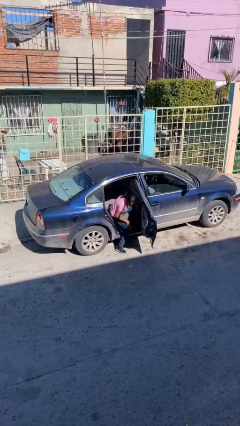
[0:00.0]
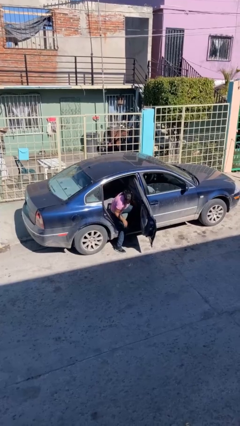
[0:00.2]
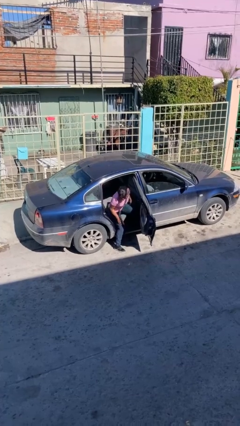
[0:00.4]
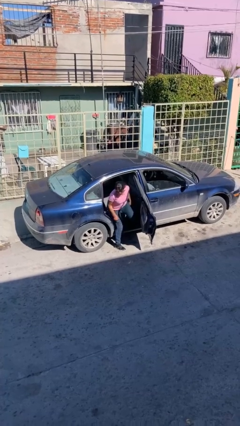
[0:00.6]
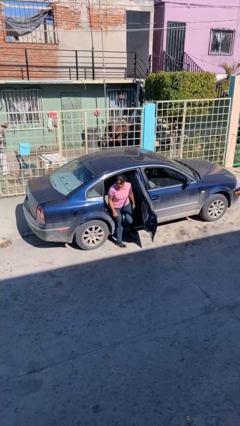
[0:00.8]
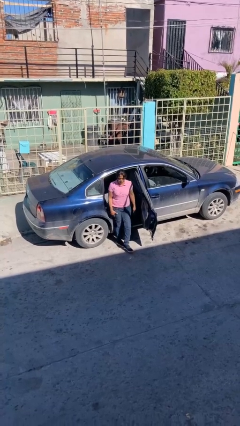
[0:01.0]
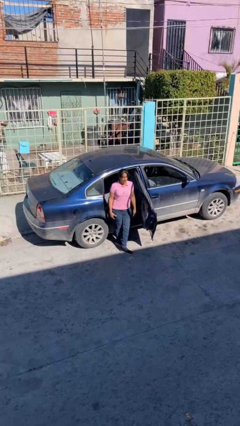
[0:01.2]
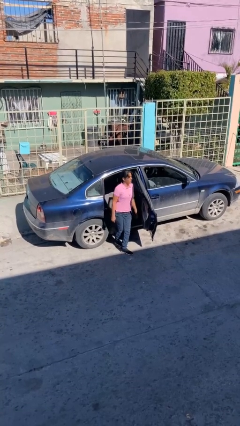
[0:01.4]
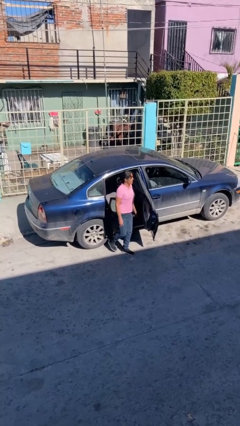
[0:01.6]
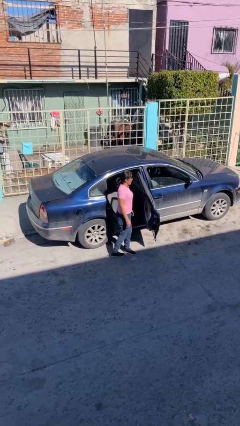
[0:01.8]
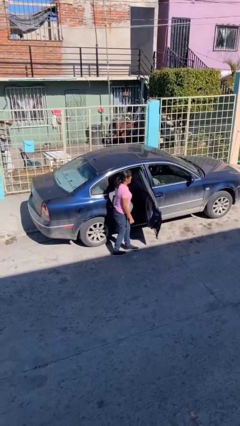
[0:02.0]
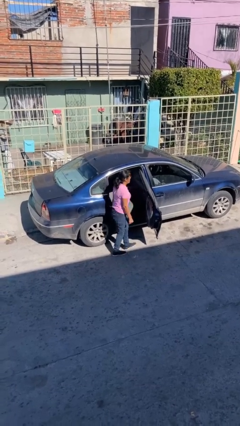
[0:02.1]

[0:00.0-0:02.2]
person exits car

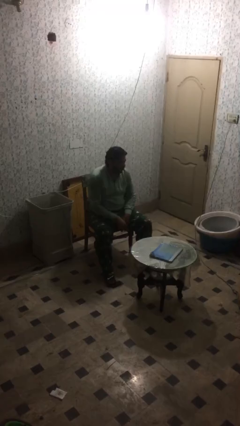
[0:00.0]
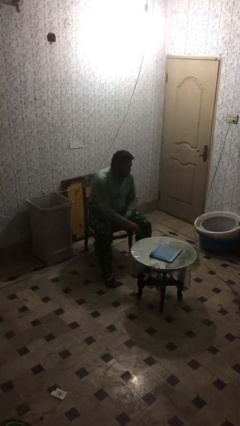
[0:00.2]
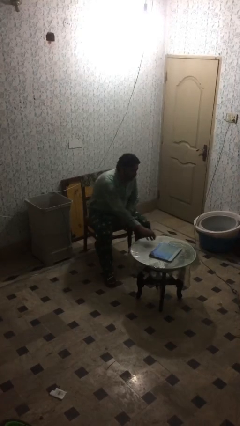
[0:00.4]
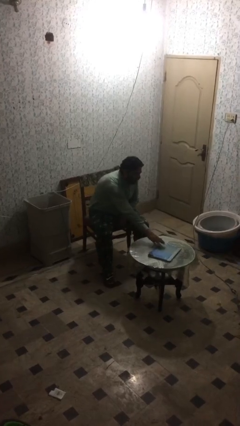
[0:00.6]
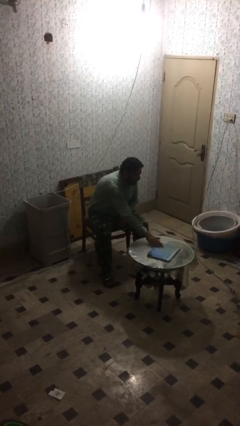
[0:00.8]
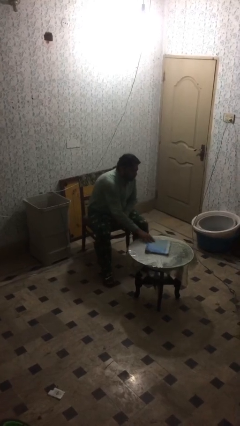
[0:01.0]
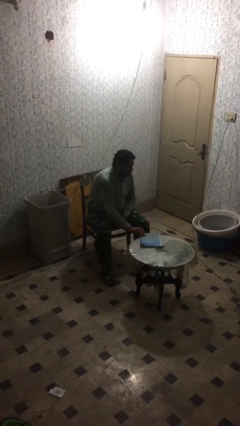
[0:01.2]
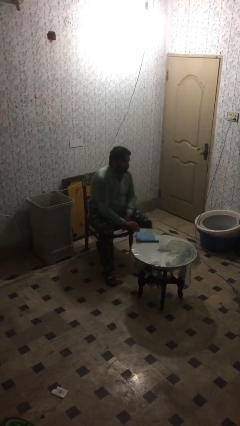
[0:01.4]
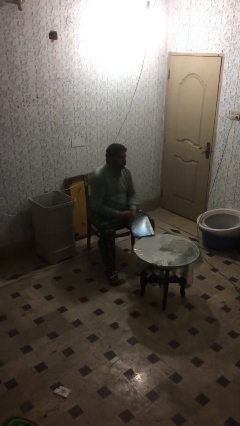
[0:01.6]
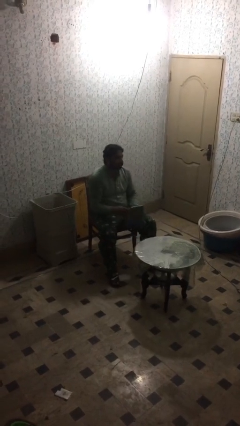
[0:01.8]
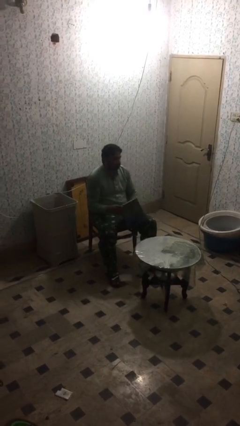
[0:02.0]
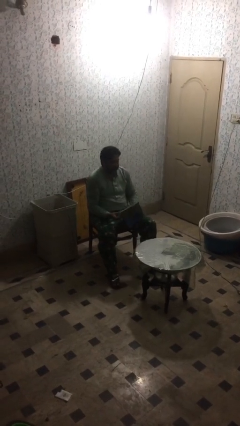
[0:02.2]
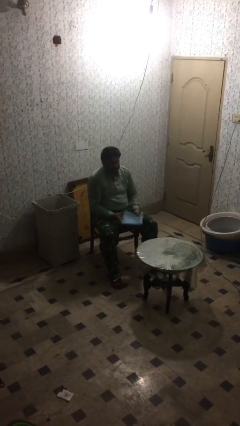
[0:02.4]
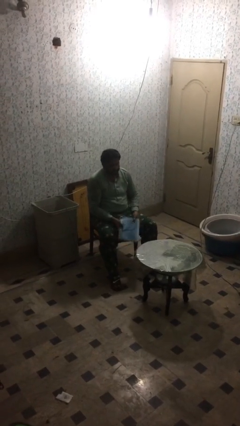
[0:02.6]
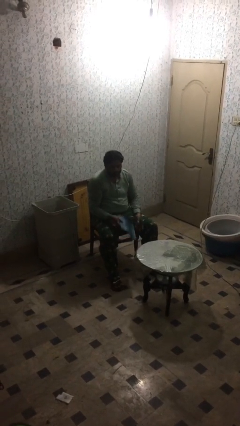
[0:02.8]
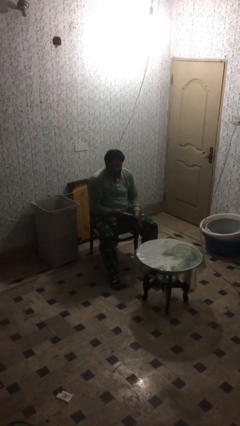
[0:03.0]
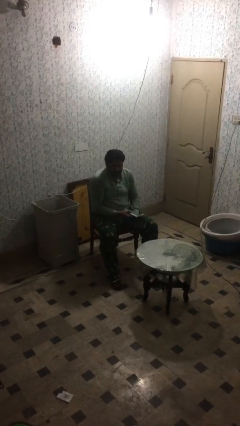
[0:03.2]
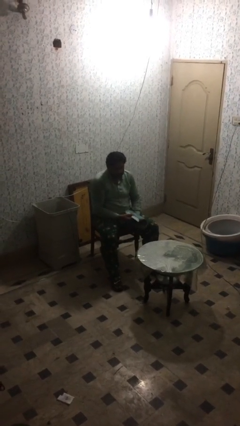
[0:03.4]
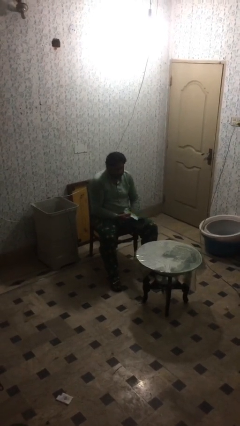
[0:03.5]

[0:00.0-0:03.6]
person picks up object from table

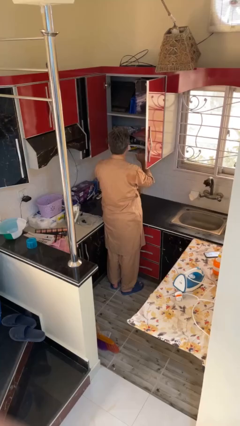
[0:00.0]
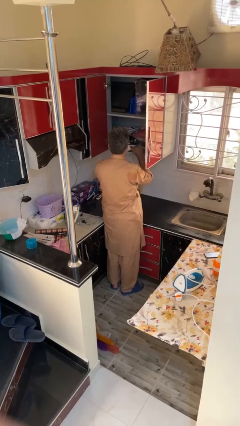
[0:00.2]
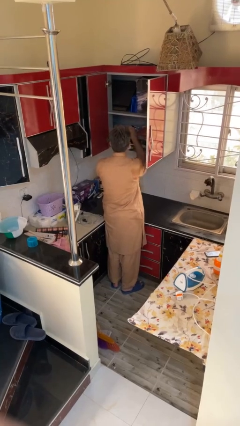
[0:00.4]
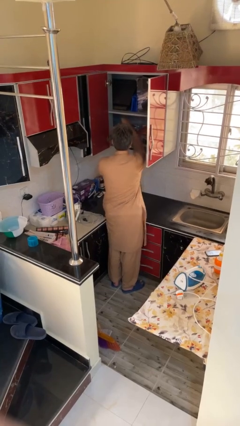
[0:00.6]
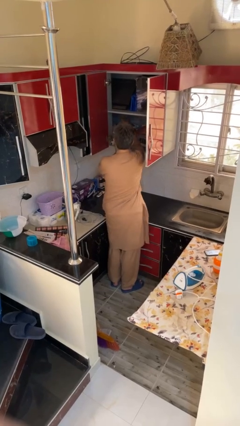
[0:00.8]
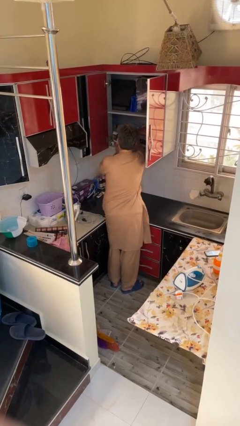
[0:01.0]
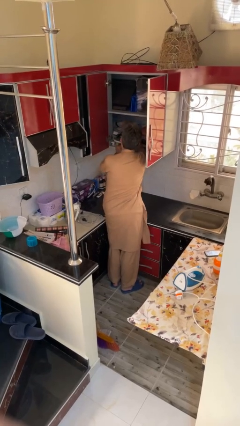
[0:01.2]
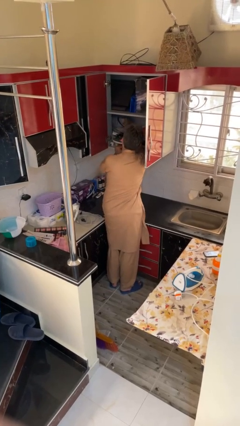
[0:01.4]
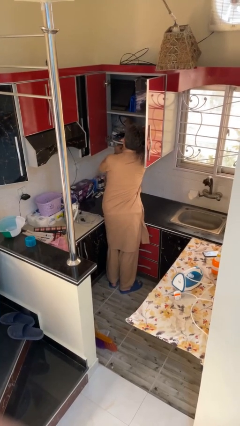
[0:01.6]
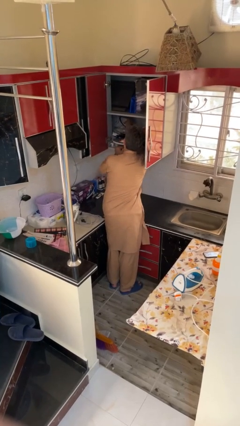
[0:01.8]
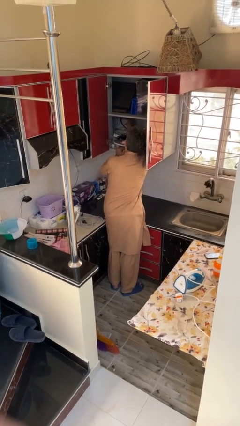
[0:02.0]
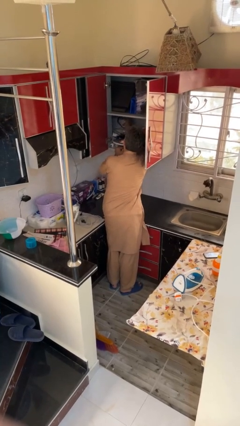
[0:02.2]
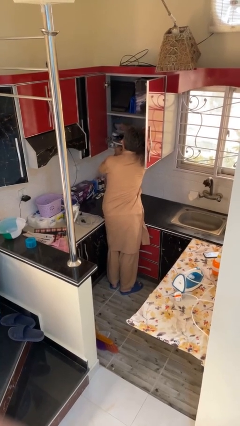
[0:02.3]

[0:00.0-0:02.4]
person searches in cabinet

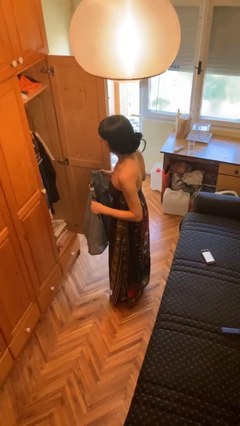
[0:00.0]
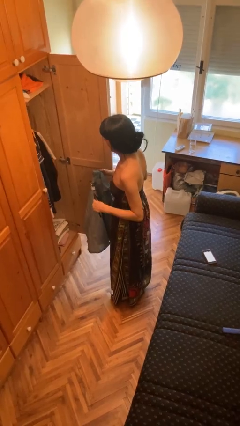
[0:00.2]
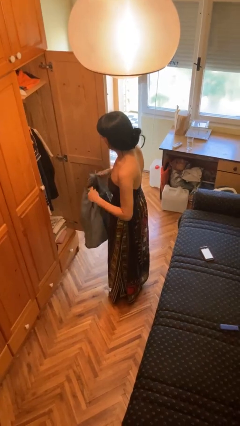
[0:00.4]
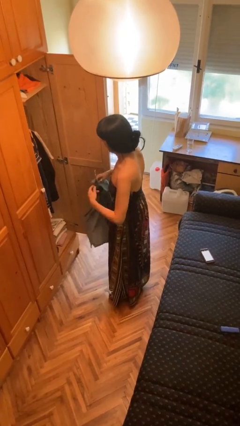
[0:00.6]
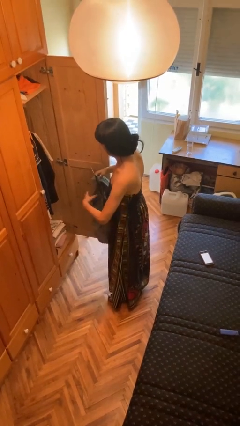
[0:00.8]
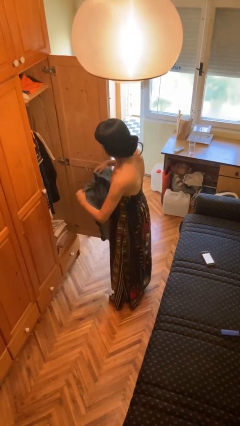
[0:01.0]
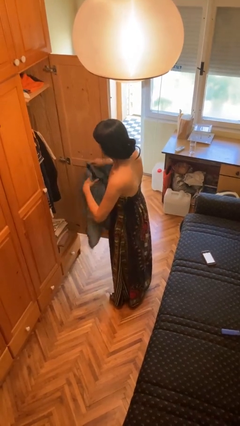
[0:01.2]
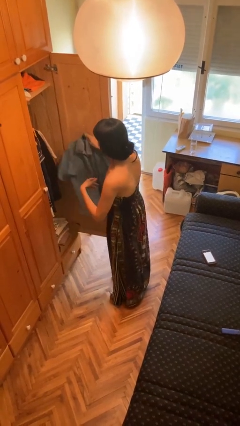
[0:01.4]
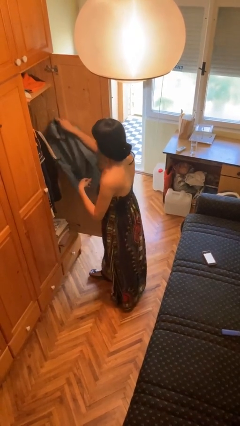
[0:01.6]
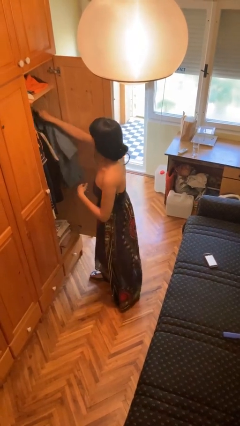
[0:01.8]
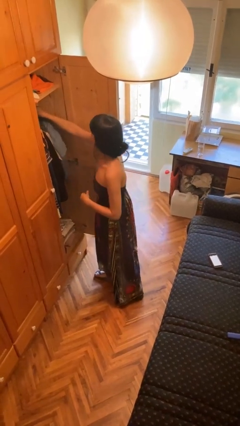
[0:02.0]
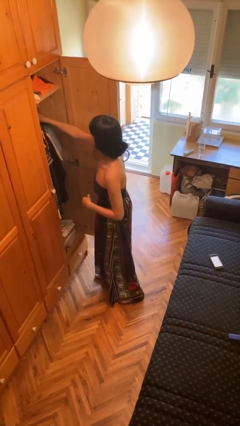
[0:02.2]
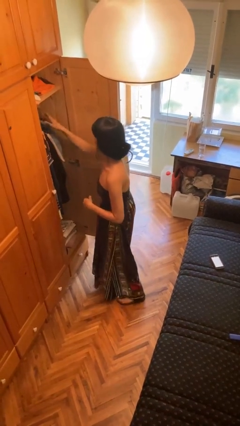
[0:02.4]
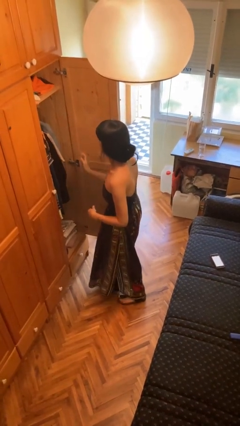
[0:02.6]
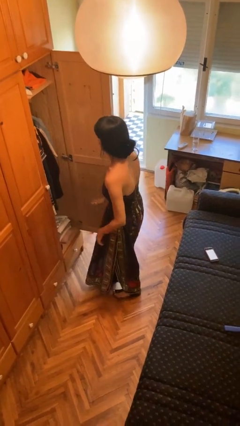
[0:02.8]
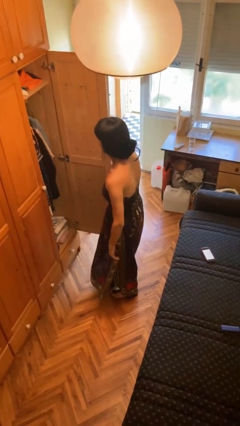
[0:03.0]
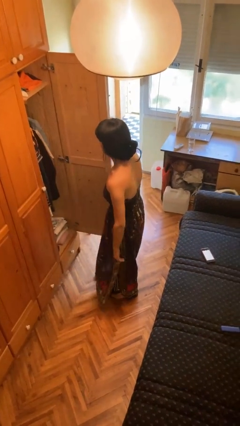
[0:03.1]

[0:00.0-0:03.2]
person puts clothes into closet

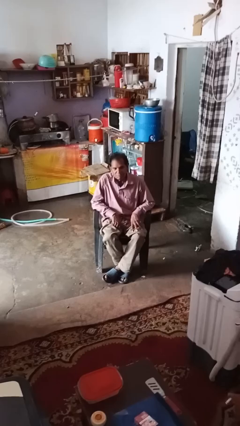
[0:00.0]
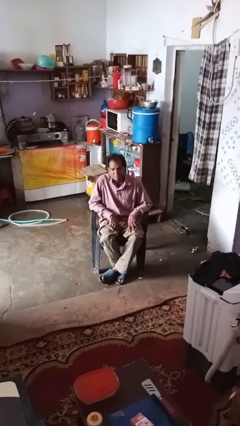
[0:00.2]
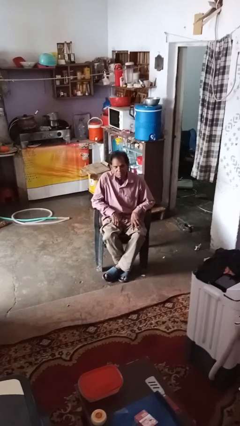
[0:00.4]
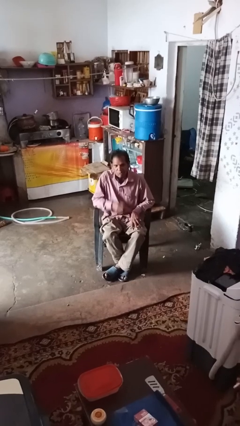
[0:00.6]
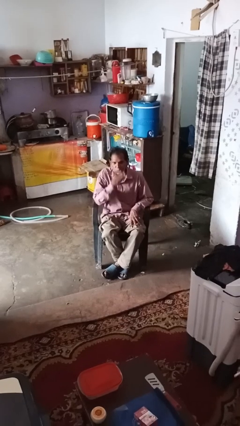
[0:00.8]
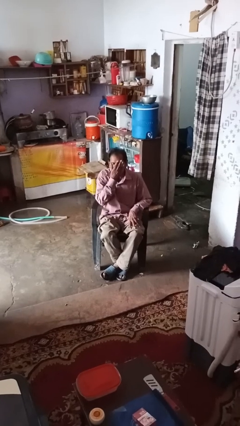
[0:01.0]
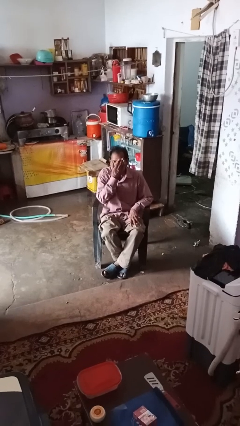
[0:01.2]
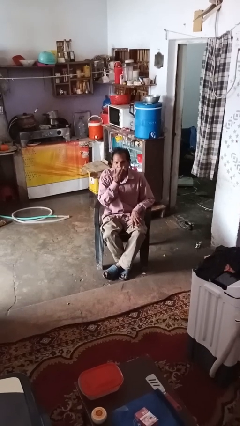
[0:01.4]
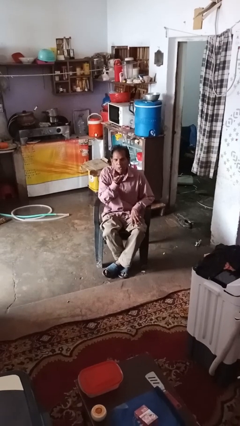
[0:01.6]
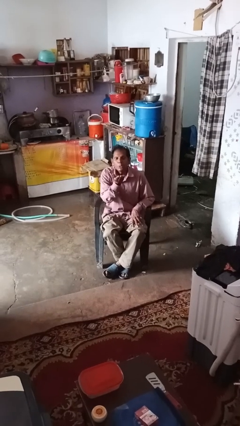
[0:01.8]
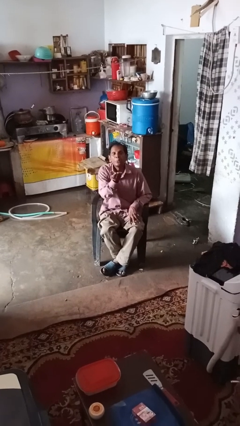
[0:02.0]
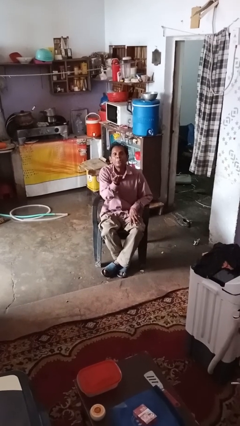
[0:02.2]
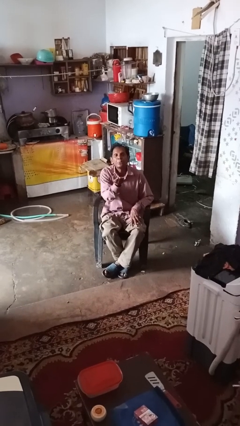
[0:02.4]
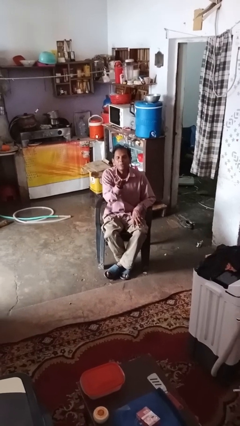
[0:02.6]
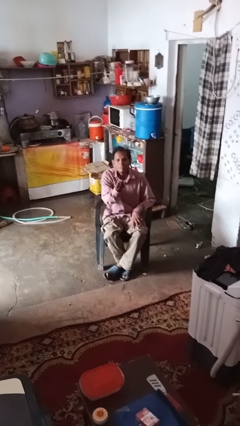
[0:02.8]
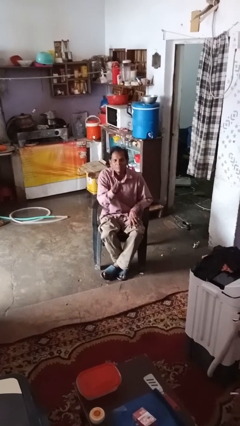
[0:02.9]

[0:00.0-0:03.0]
person gestures blow kiss

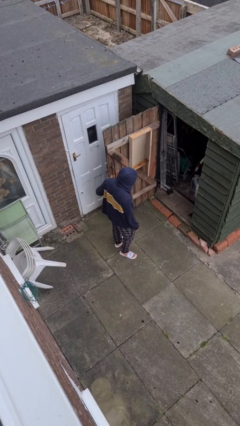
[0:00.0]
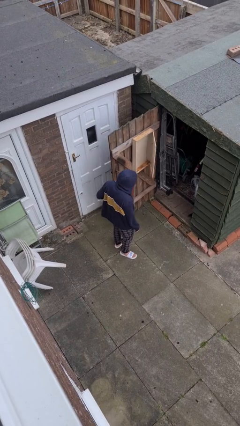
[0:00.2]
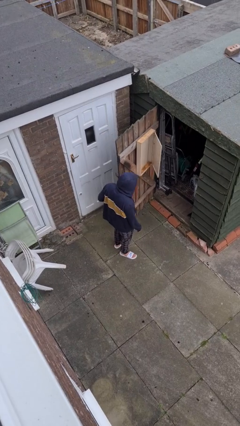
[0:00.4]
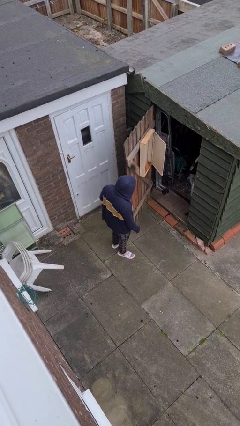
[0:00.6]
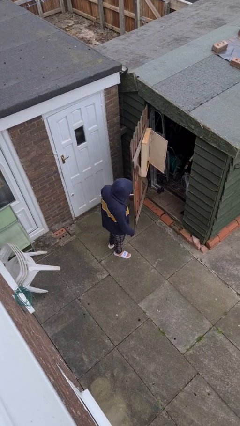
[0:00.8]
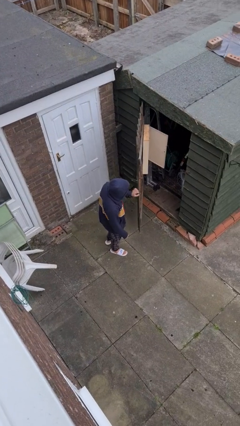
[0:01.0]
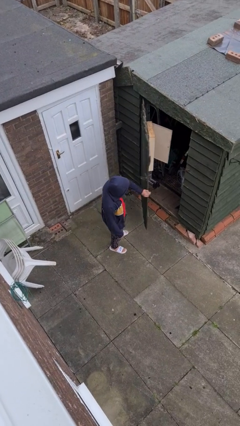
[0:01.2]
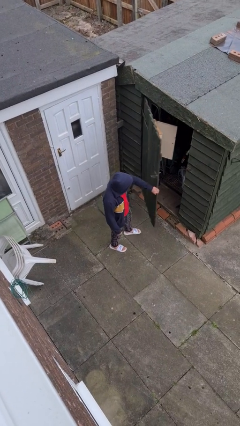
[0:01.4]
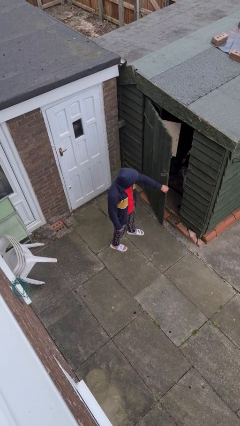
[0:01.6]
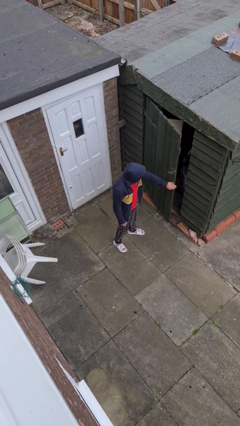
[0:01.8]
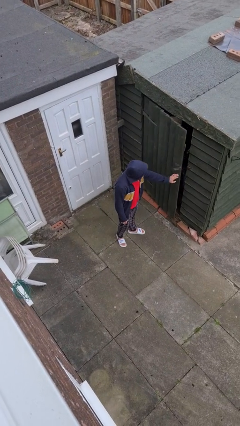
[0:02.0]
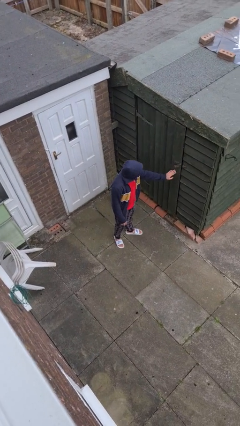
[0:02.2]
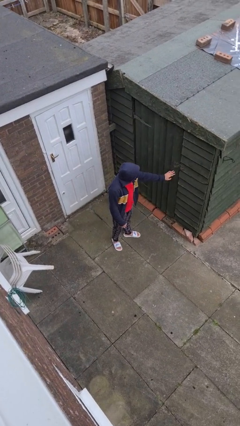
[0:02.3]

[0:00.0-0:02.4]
person closes facility door

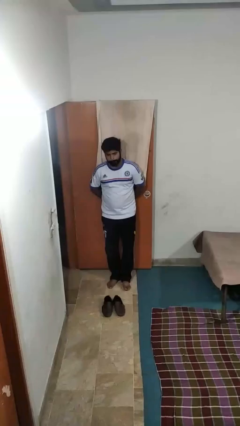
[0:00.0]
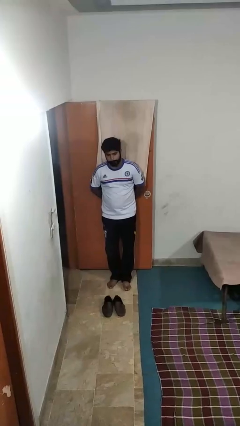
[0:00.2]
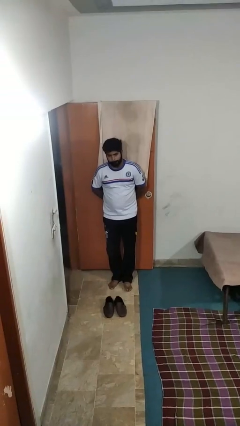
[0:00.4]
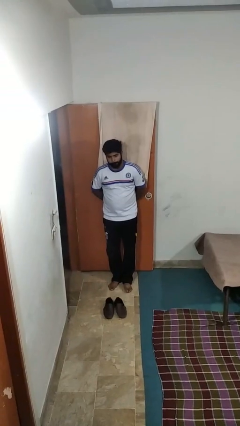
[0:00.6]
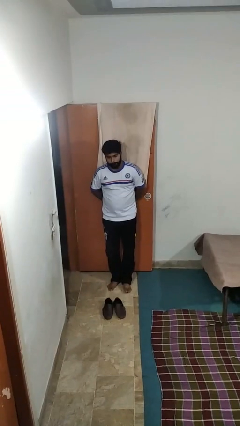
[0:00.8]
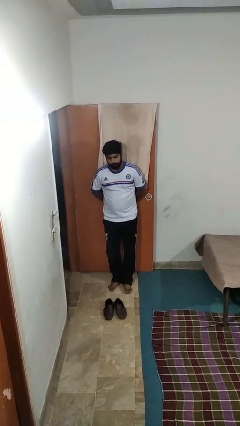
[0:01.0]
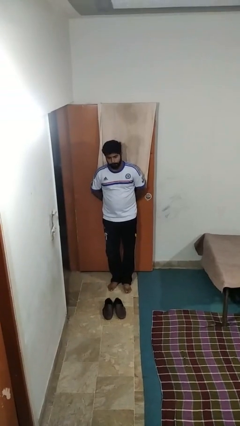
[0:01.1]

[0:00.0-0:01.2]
person puts on shoes
